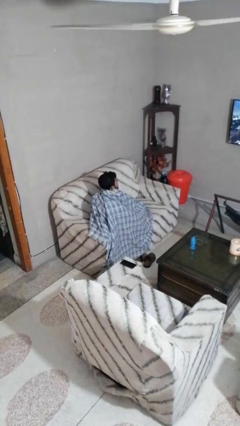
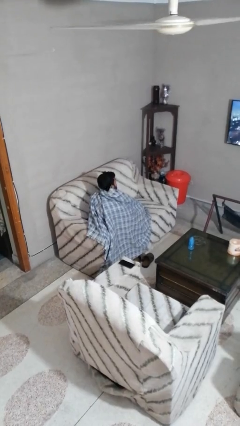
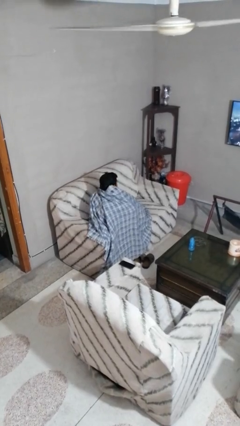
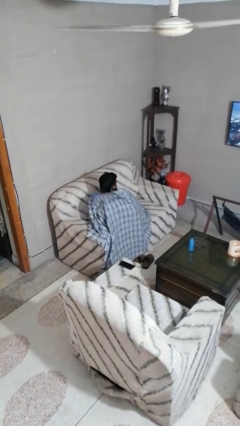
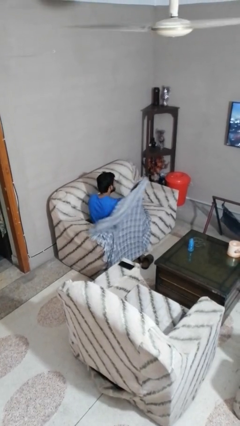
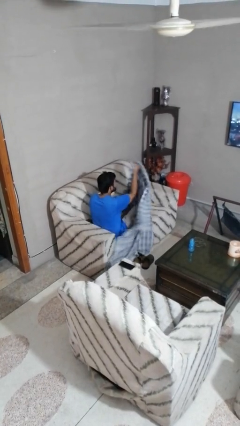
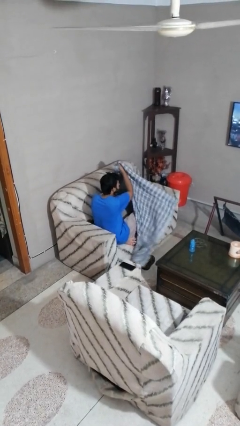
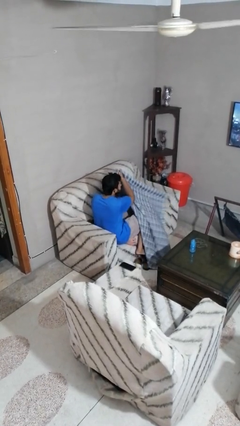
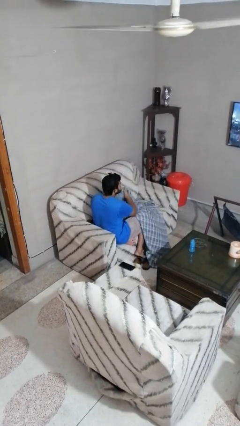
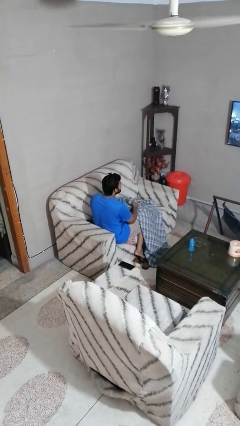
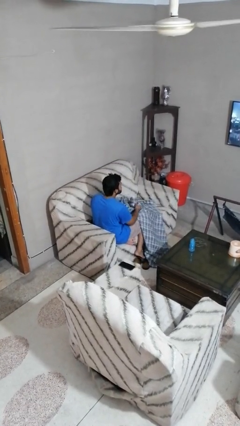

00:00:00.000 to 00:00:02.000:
person uncovers with blanket

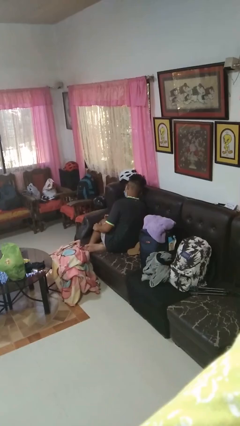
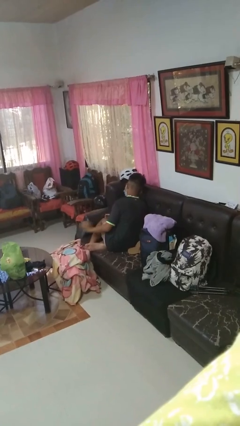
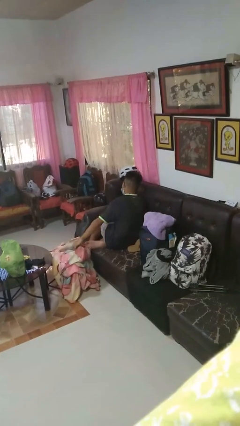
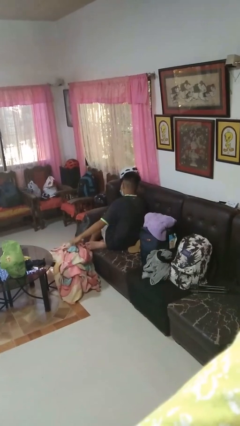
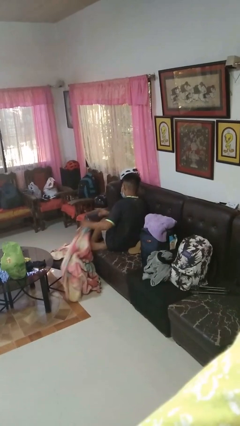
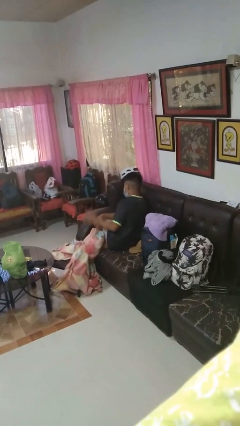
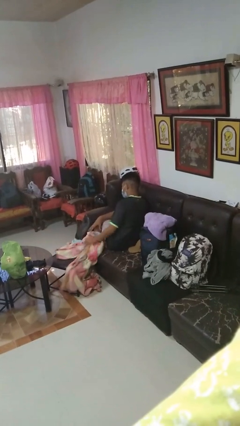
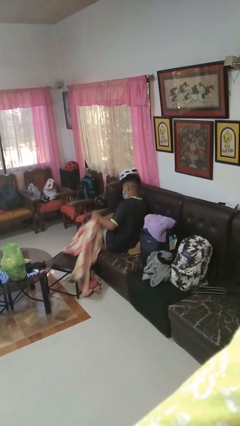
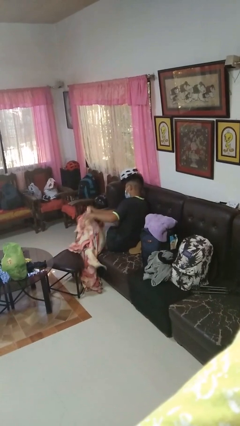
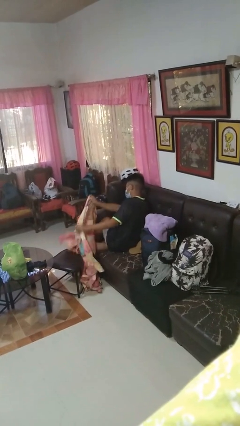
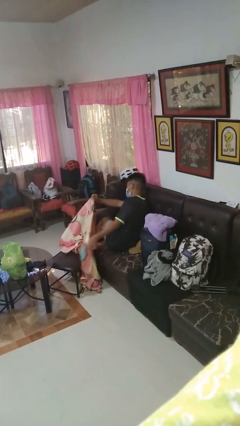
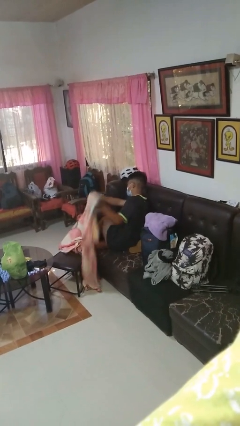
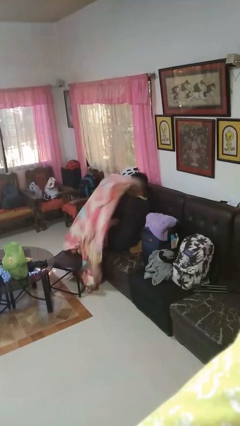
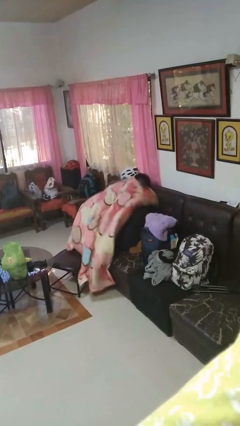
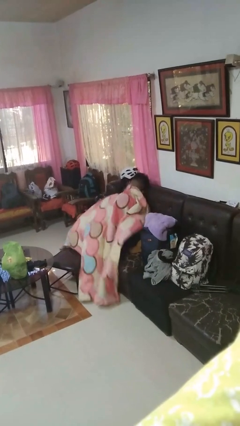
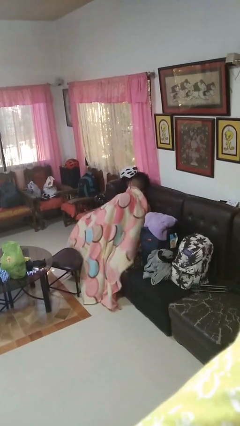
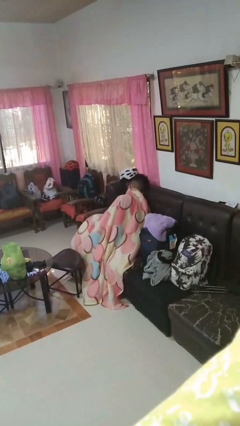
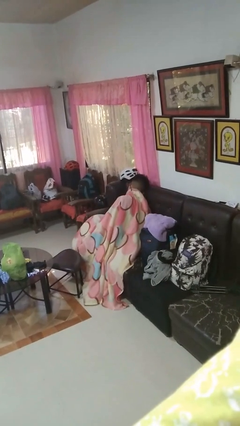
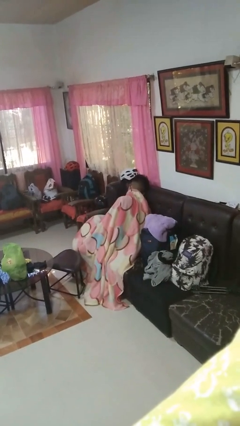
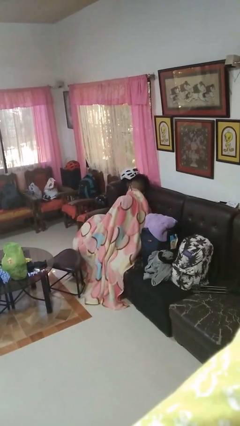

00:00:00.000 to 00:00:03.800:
person covers with blanket

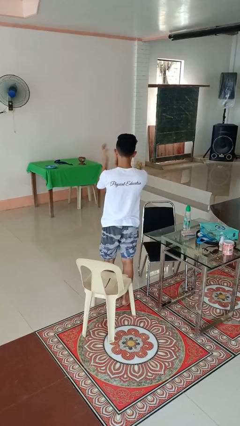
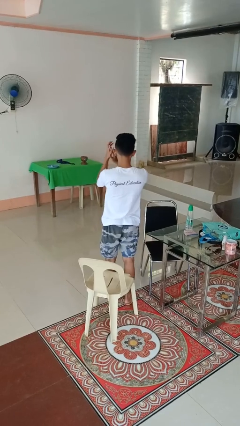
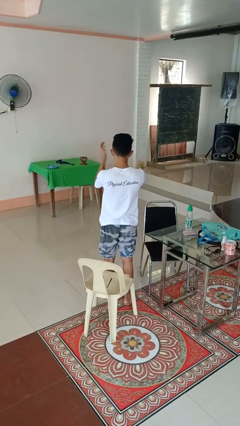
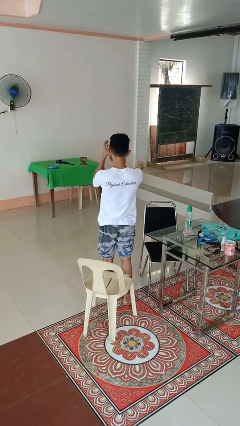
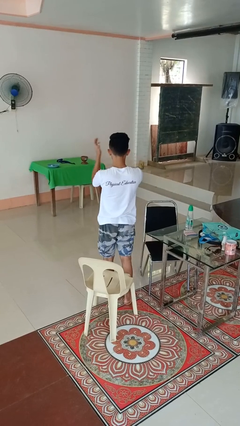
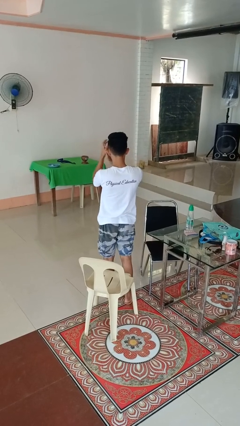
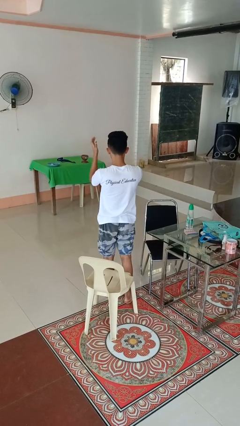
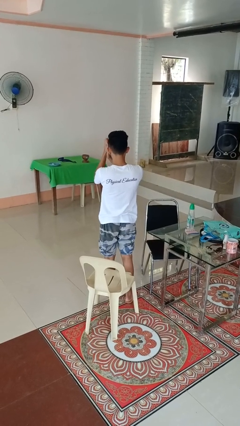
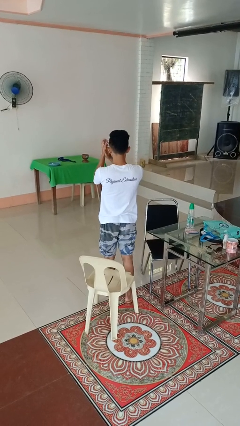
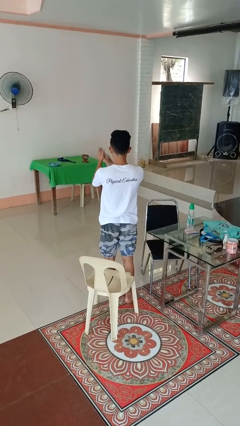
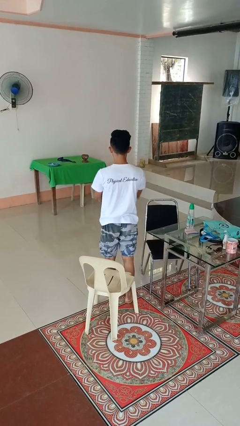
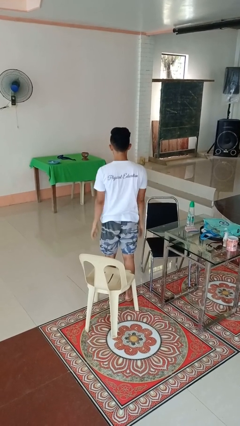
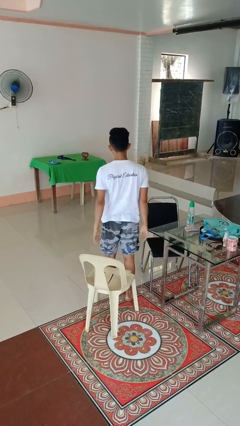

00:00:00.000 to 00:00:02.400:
person claps hands

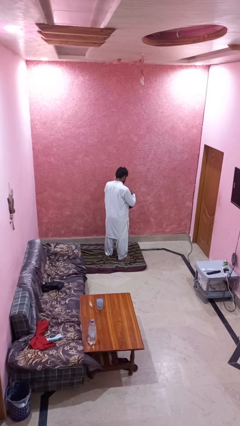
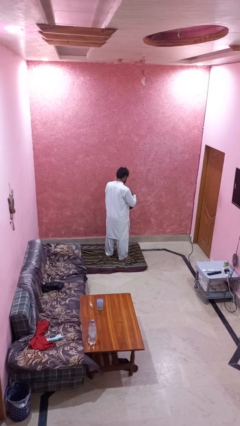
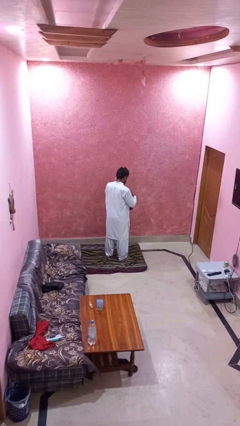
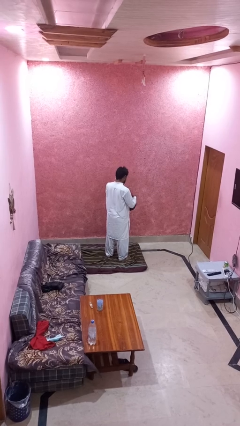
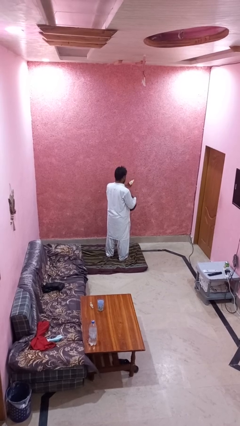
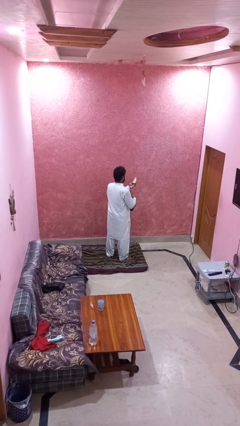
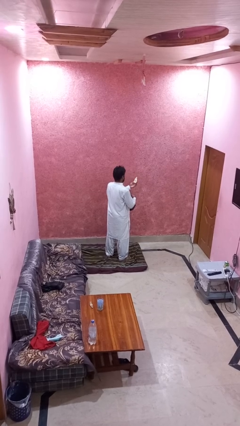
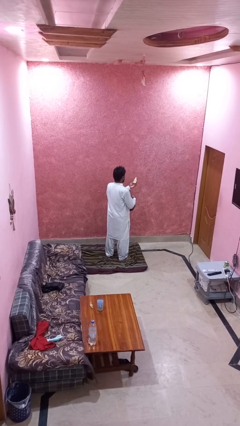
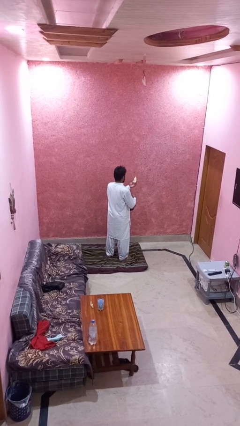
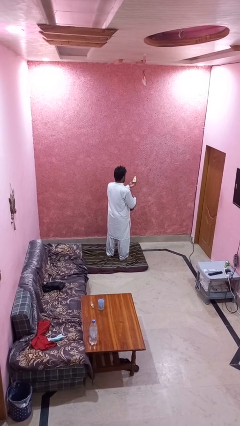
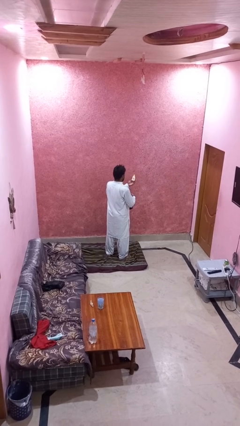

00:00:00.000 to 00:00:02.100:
person takes object from purse

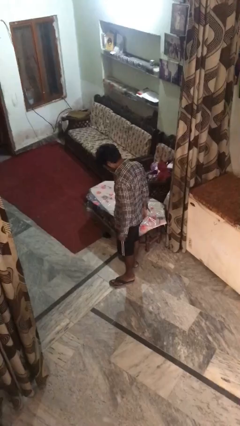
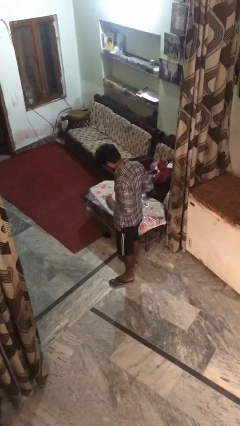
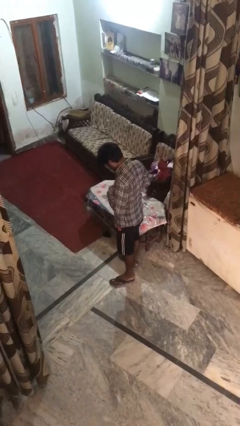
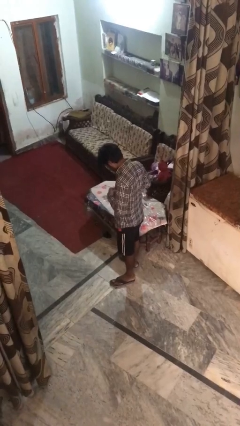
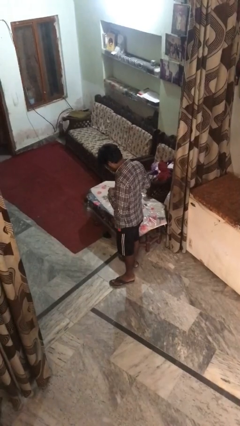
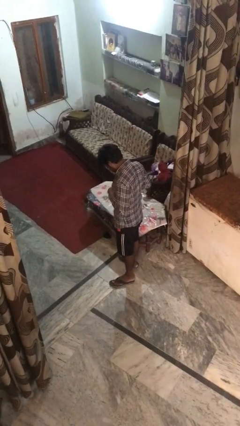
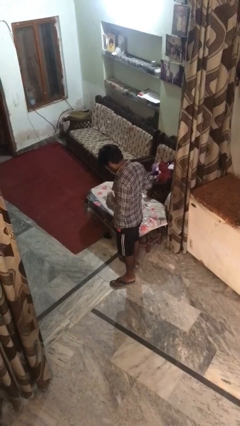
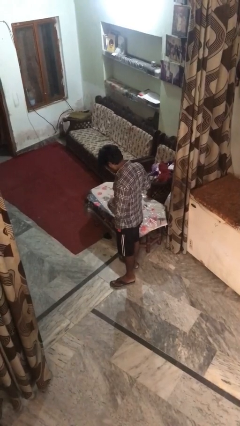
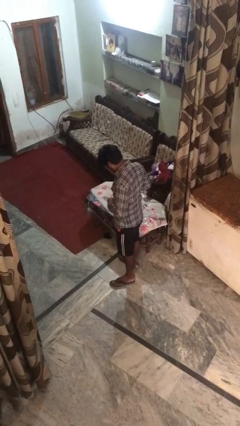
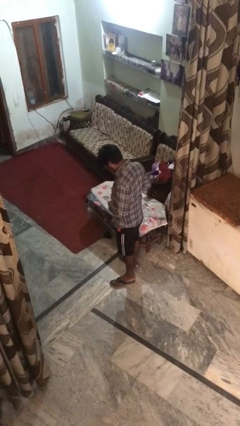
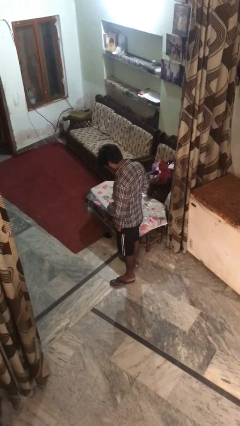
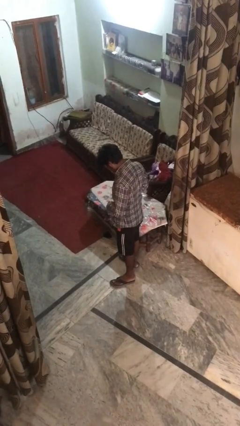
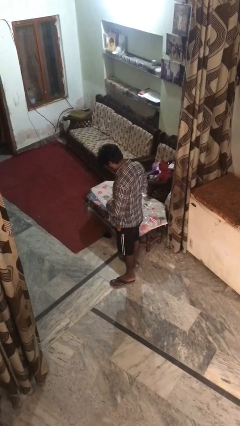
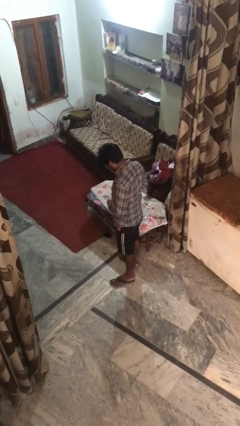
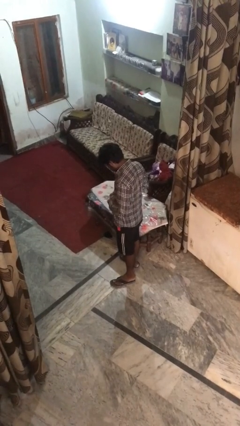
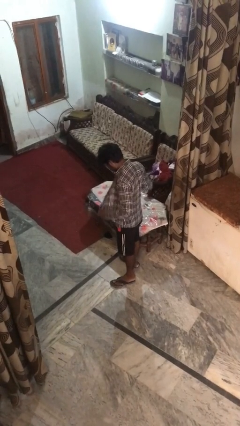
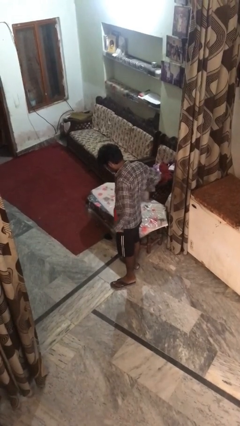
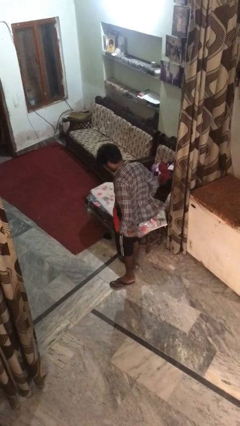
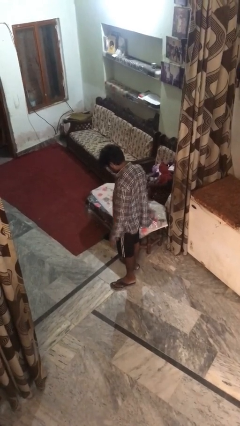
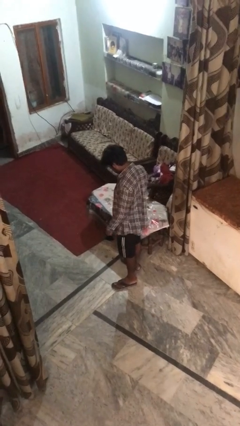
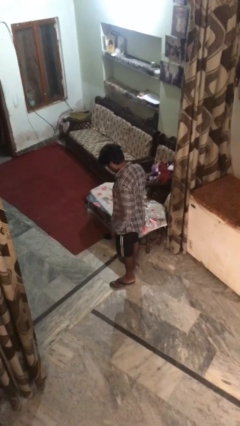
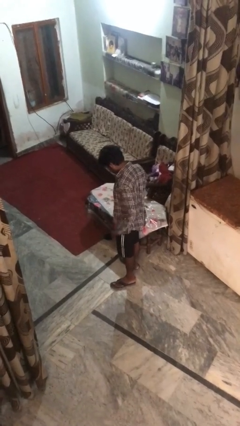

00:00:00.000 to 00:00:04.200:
person unbuttons shirt

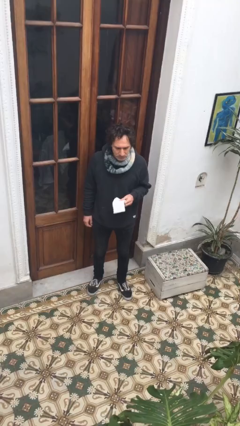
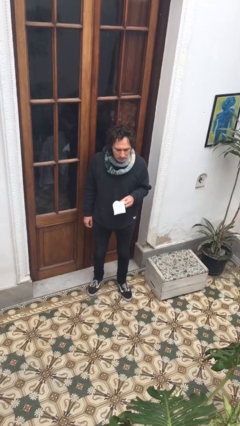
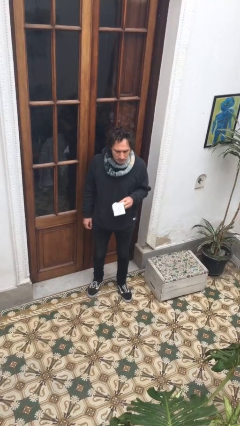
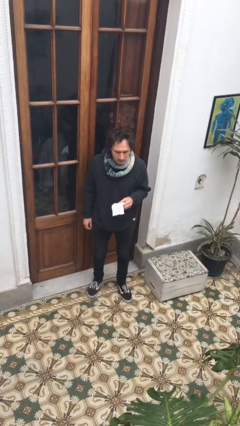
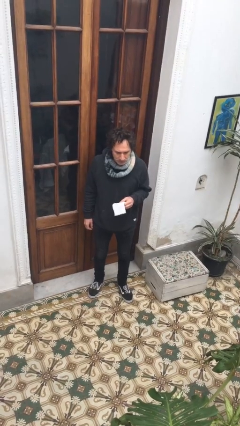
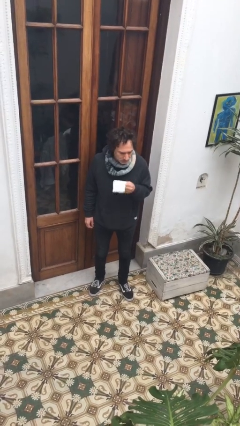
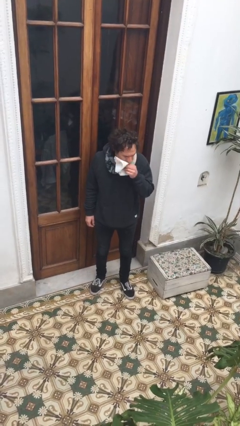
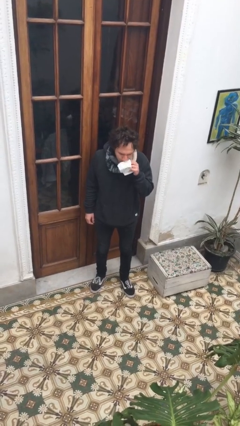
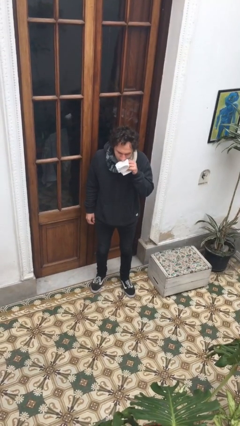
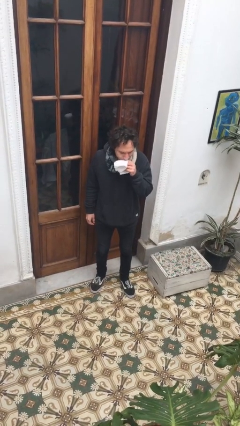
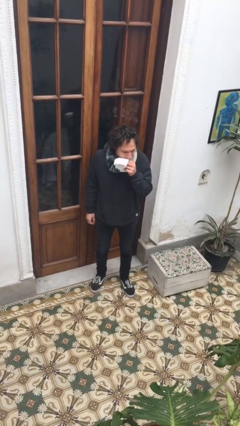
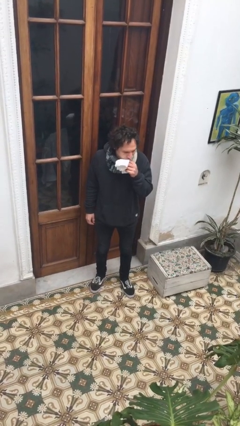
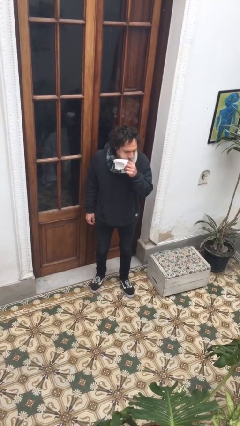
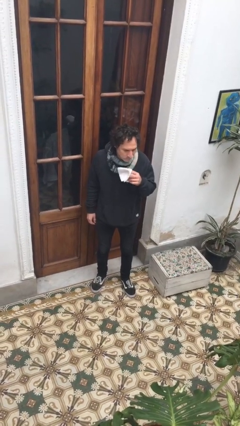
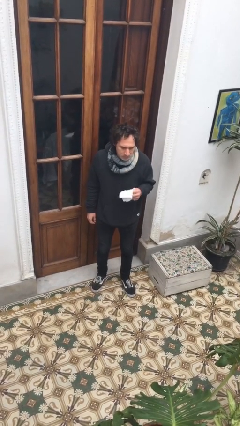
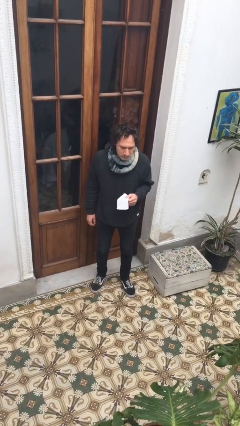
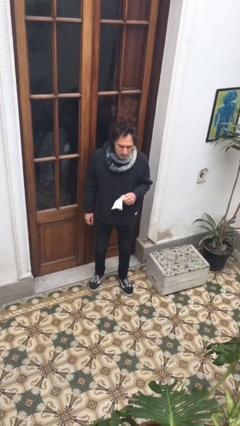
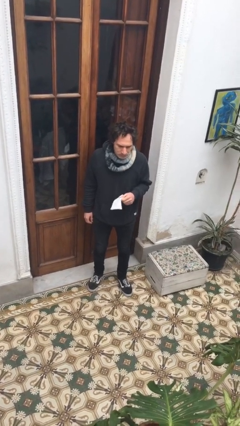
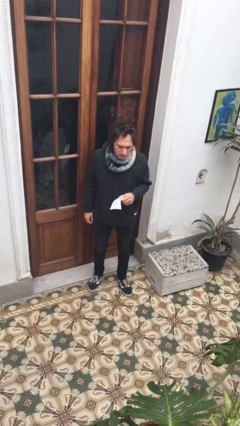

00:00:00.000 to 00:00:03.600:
person wipes mouth with napkin
